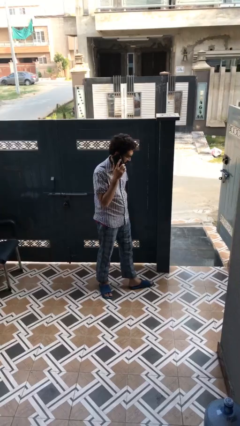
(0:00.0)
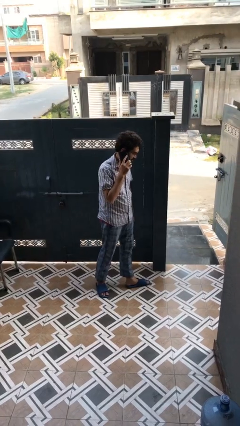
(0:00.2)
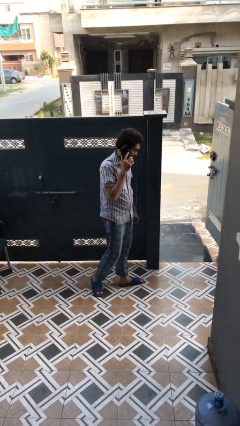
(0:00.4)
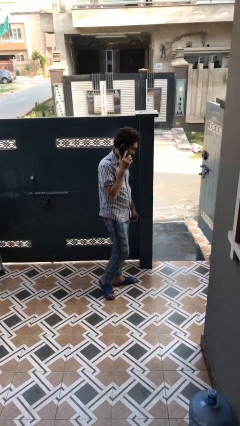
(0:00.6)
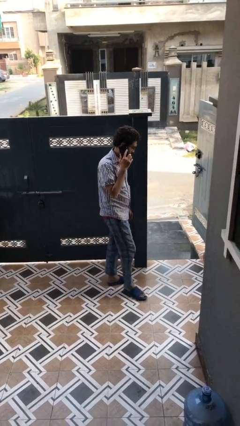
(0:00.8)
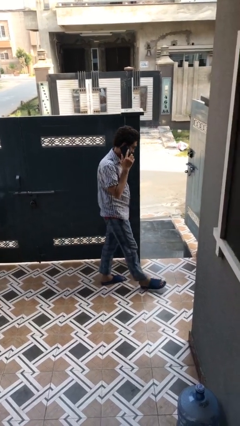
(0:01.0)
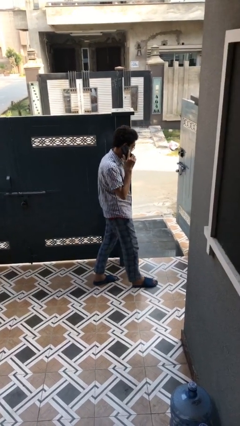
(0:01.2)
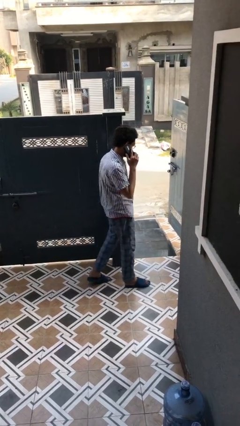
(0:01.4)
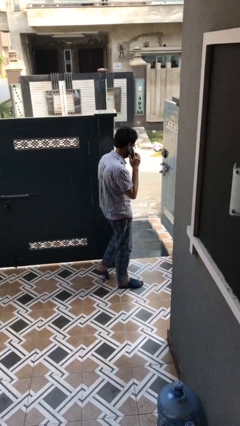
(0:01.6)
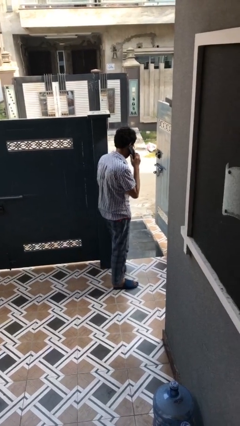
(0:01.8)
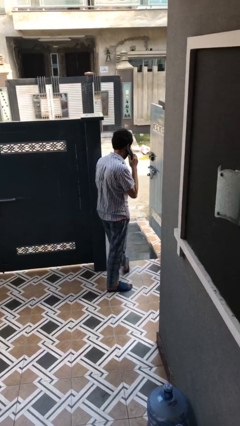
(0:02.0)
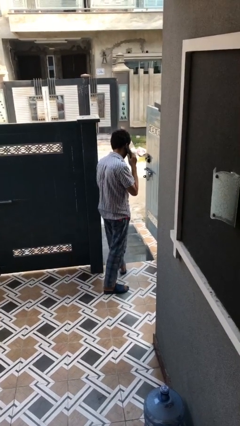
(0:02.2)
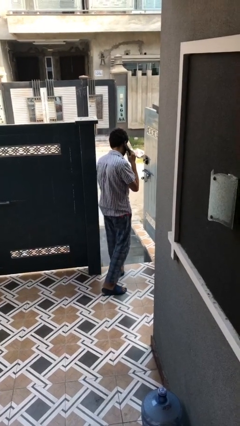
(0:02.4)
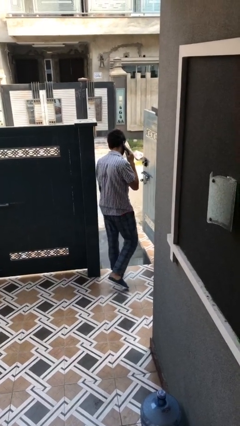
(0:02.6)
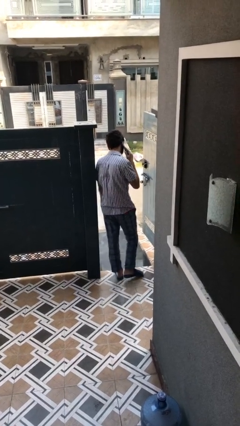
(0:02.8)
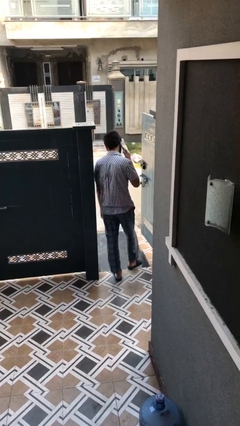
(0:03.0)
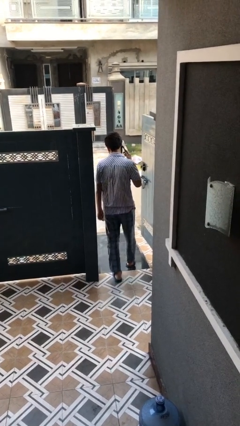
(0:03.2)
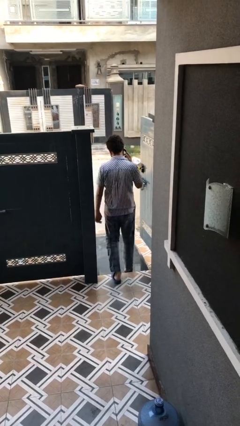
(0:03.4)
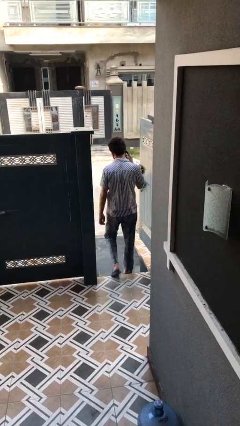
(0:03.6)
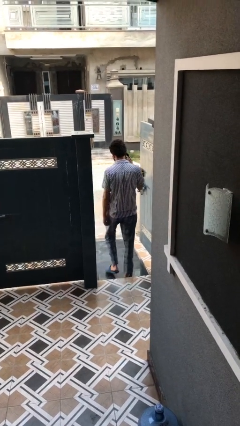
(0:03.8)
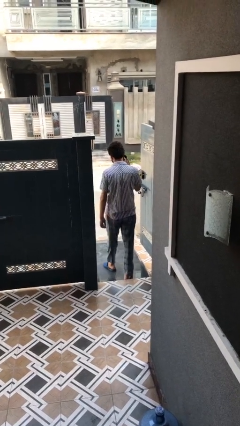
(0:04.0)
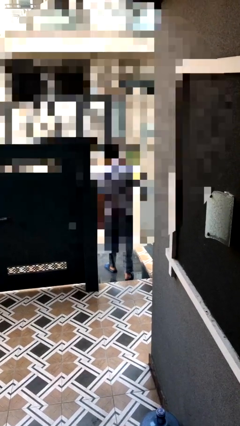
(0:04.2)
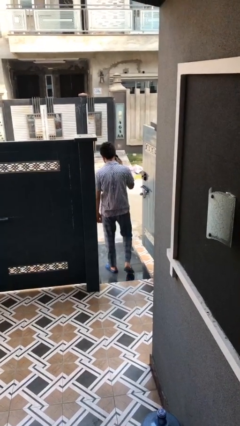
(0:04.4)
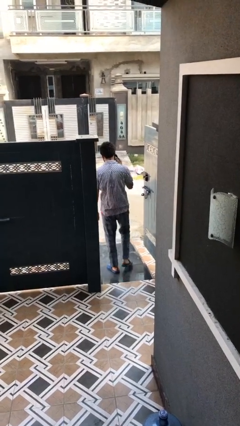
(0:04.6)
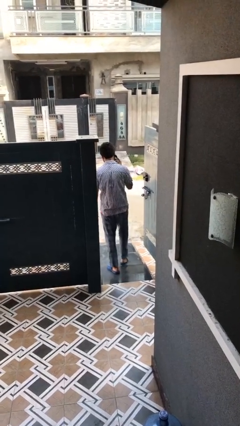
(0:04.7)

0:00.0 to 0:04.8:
person exits scene through structure

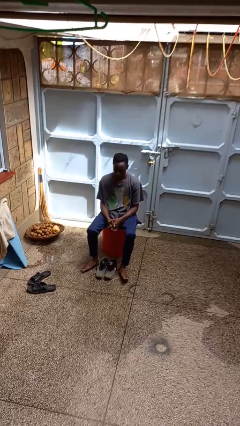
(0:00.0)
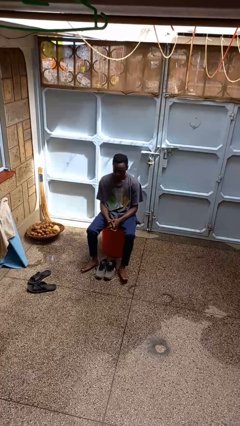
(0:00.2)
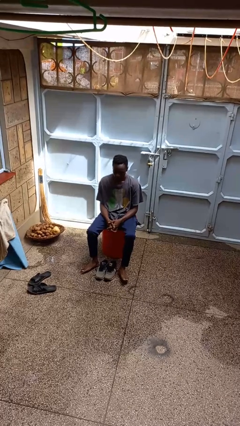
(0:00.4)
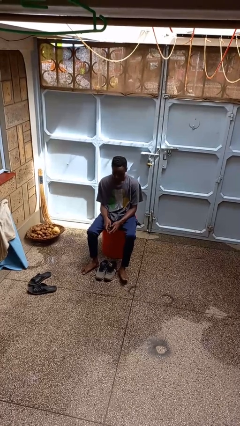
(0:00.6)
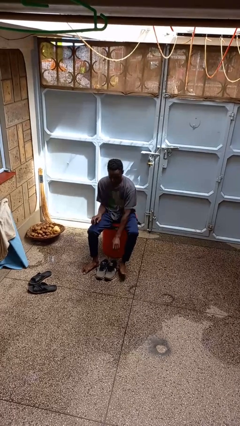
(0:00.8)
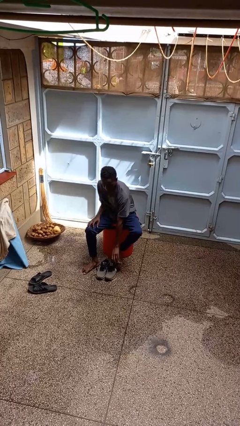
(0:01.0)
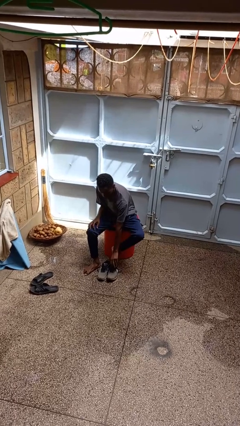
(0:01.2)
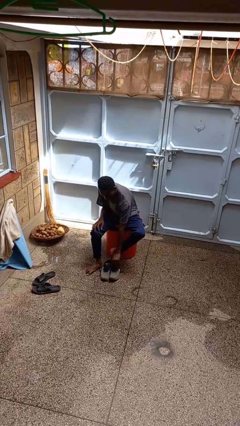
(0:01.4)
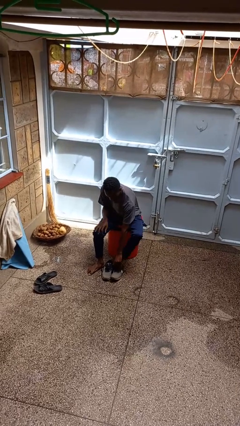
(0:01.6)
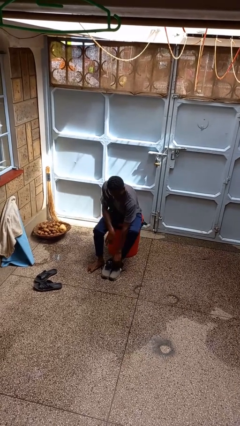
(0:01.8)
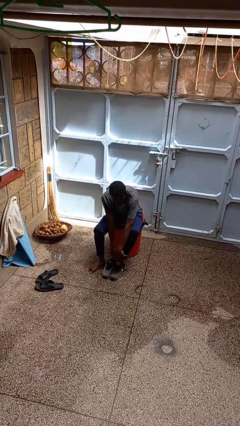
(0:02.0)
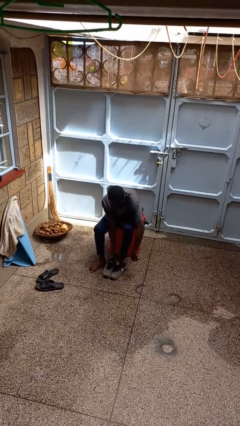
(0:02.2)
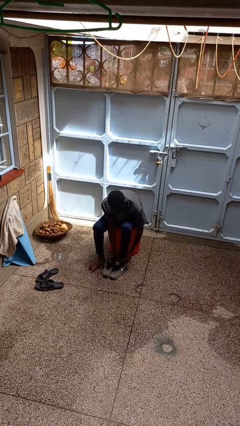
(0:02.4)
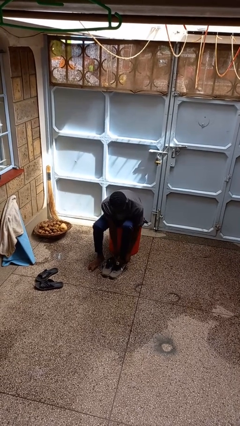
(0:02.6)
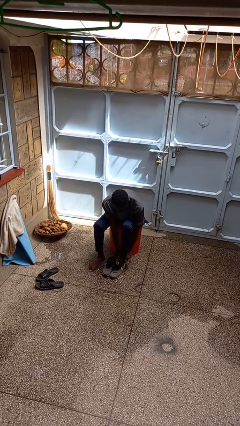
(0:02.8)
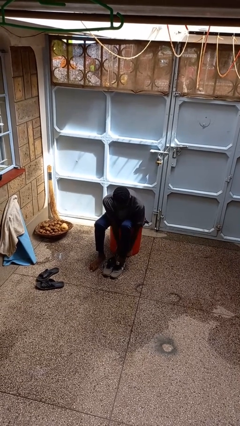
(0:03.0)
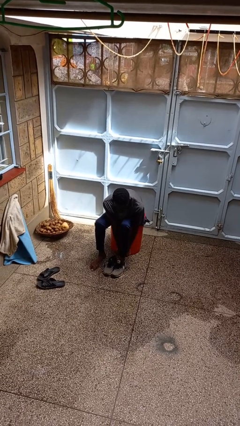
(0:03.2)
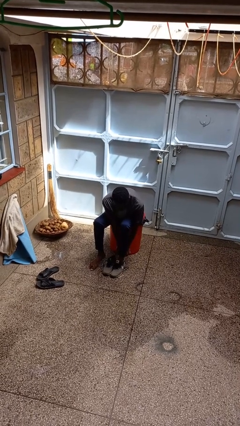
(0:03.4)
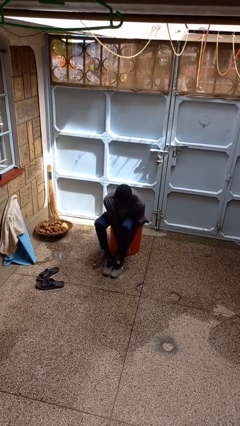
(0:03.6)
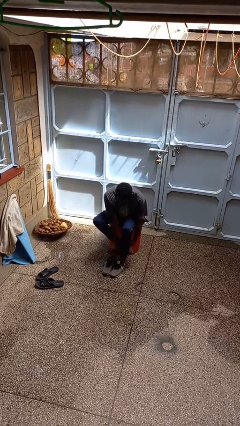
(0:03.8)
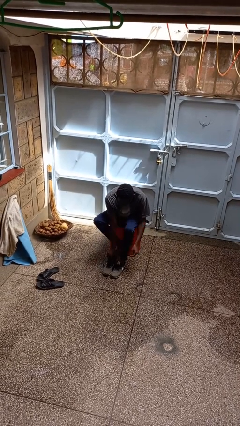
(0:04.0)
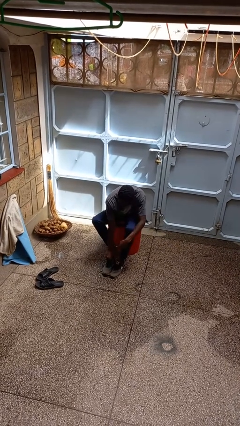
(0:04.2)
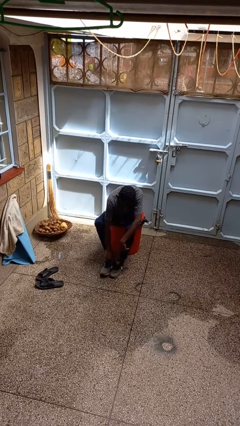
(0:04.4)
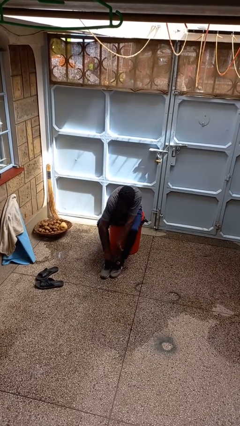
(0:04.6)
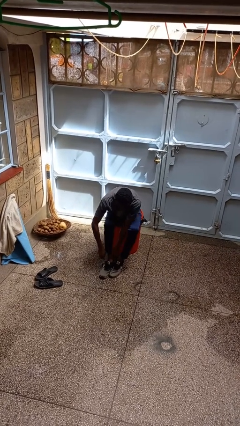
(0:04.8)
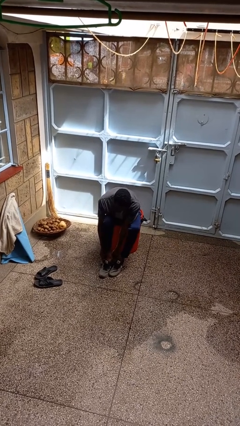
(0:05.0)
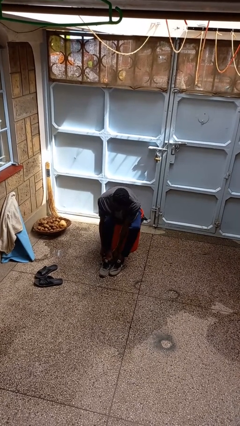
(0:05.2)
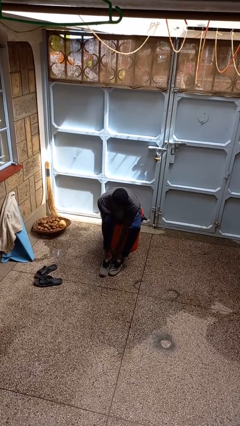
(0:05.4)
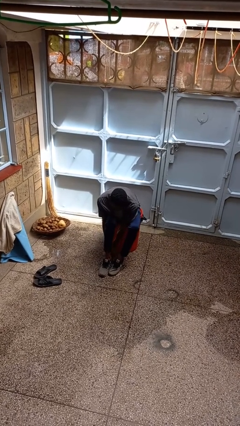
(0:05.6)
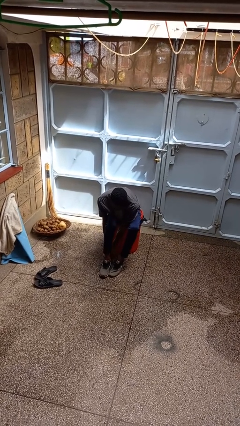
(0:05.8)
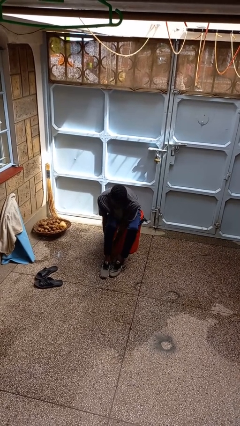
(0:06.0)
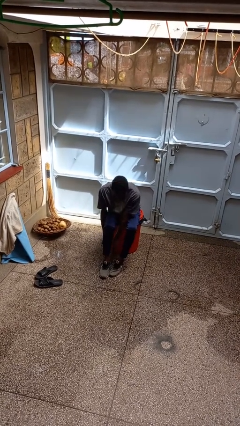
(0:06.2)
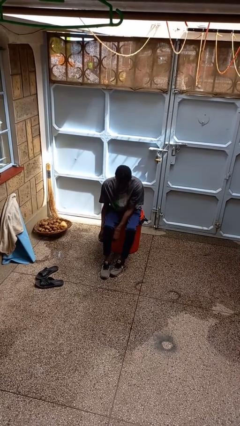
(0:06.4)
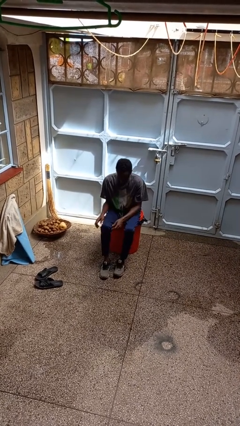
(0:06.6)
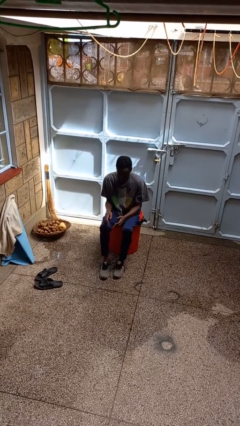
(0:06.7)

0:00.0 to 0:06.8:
person puts on shoes

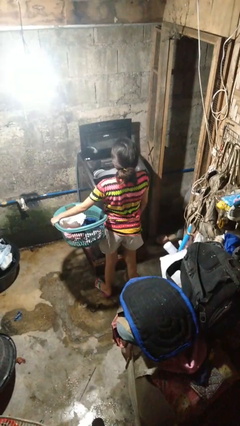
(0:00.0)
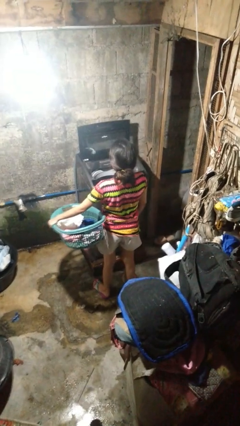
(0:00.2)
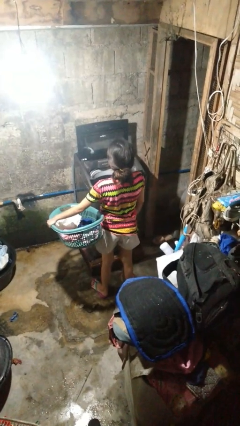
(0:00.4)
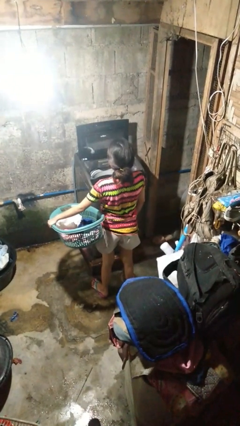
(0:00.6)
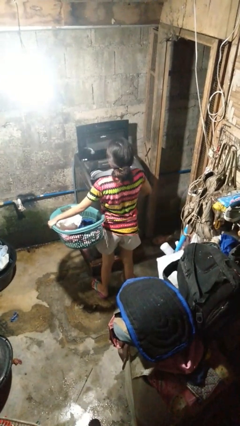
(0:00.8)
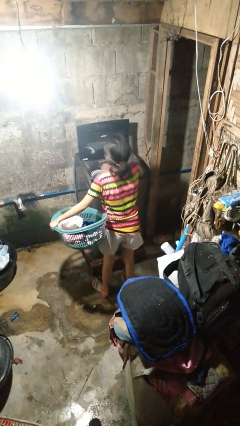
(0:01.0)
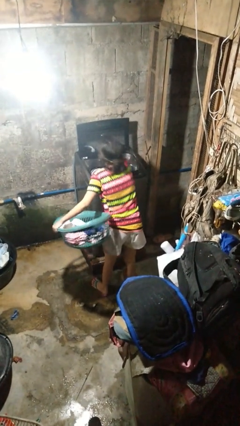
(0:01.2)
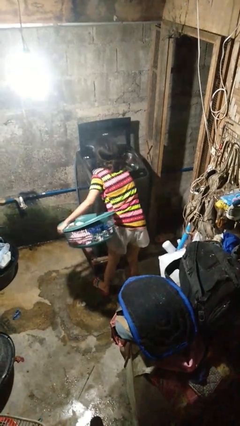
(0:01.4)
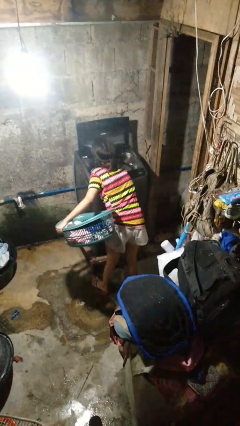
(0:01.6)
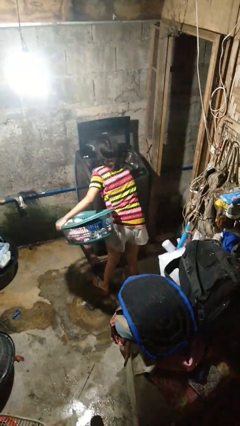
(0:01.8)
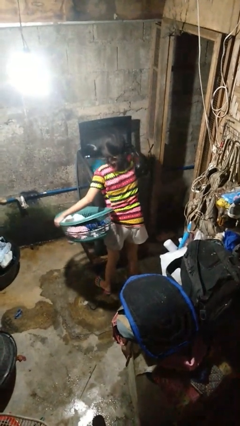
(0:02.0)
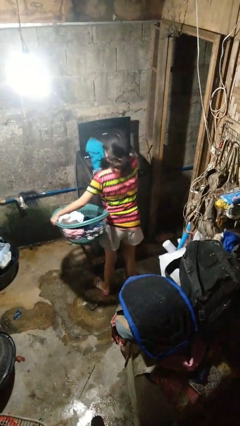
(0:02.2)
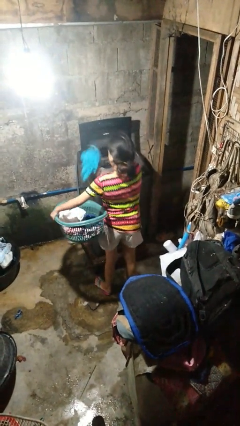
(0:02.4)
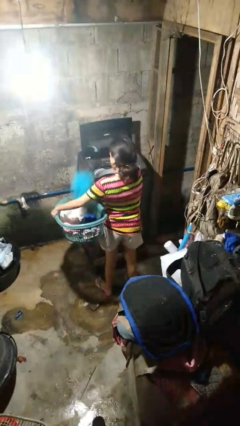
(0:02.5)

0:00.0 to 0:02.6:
person unloads clotheswasher

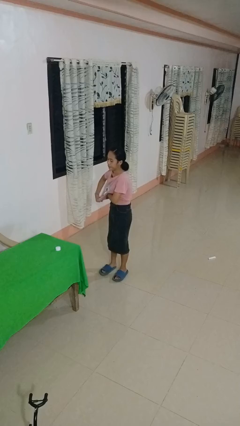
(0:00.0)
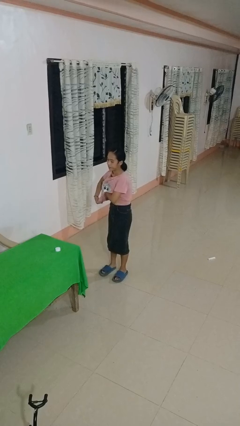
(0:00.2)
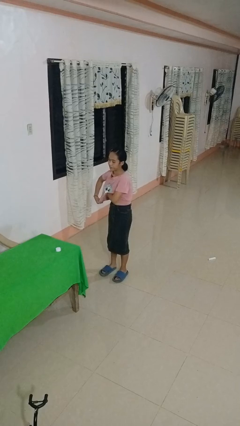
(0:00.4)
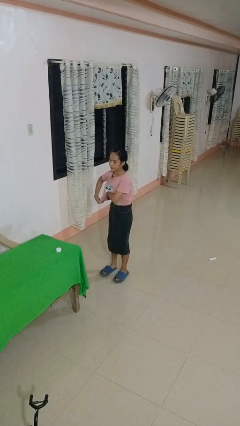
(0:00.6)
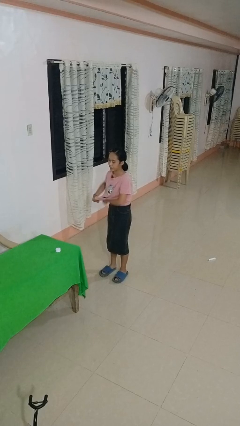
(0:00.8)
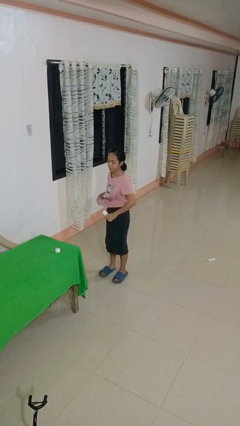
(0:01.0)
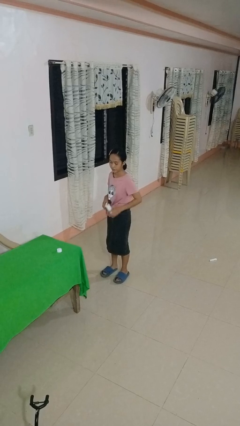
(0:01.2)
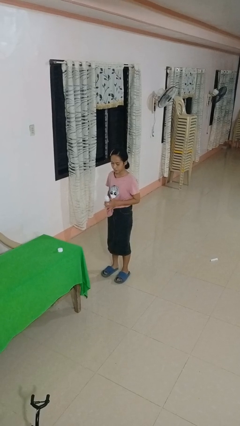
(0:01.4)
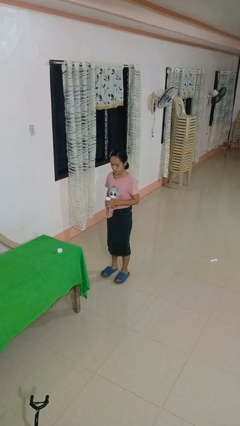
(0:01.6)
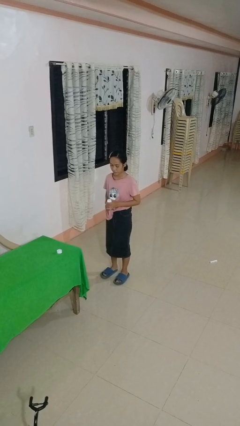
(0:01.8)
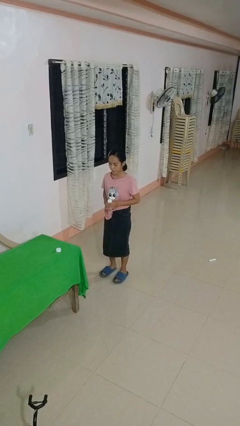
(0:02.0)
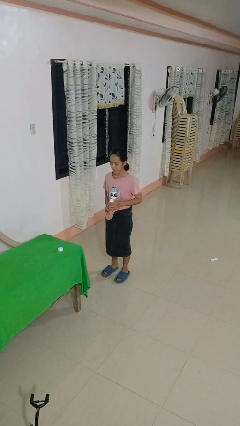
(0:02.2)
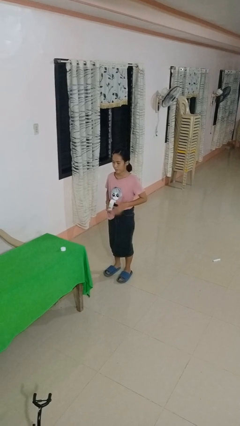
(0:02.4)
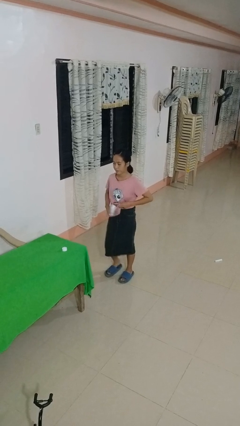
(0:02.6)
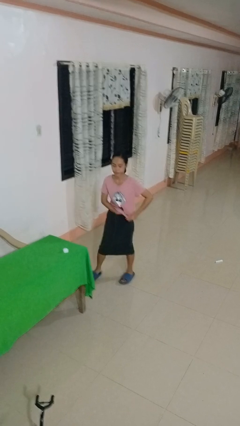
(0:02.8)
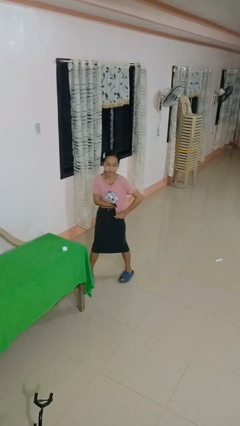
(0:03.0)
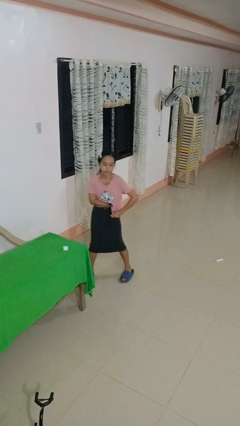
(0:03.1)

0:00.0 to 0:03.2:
person applies deodorant

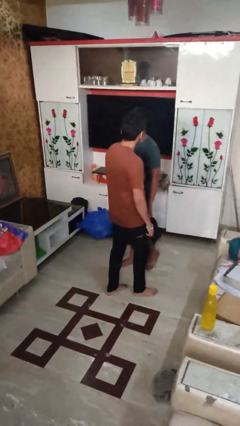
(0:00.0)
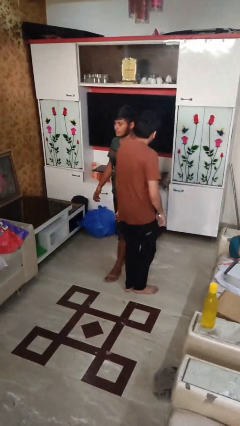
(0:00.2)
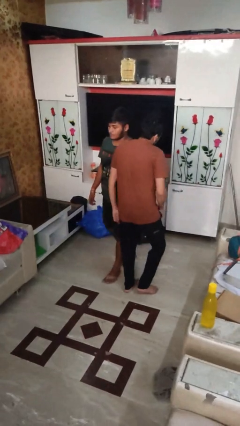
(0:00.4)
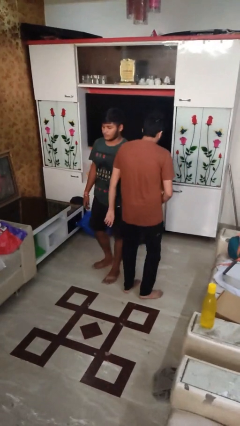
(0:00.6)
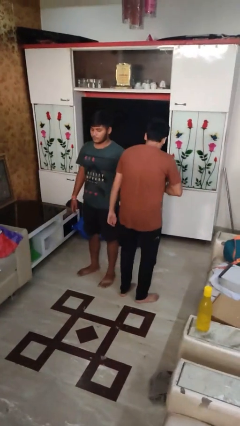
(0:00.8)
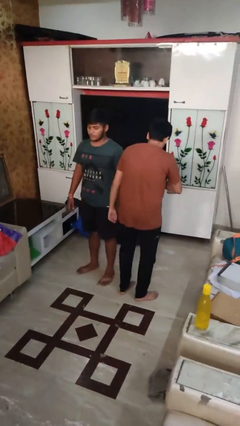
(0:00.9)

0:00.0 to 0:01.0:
person bumps into person
